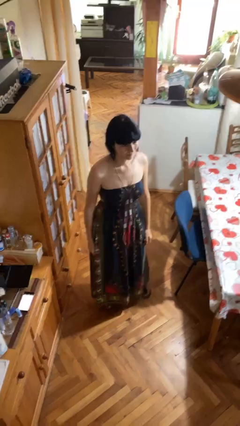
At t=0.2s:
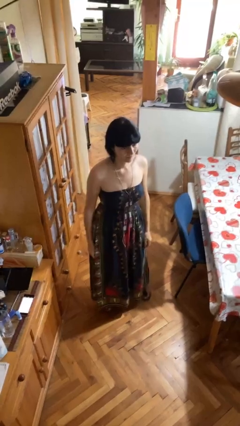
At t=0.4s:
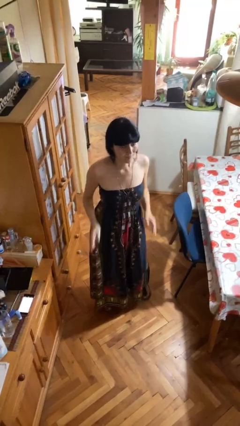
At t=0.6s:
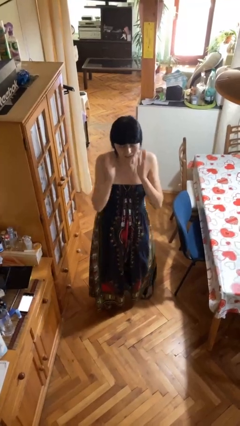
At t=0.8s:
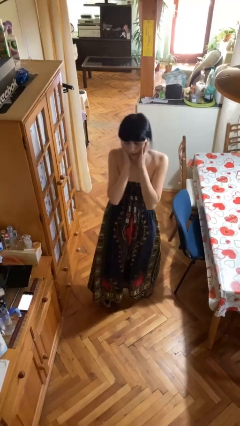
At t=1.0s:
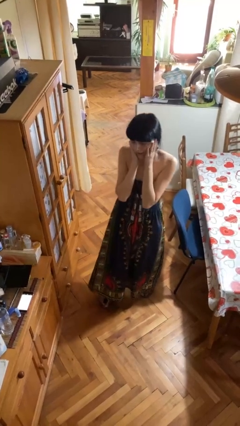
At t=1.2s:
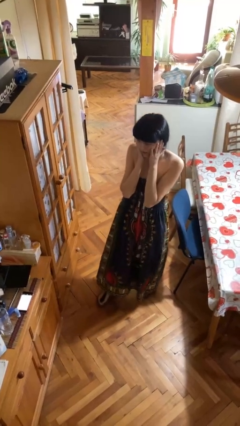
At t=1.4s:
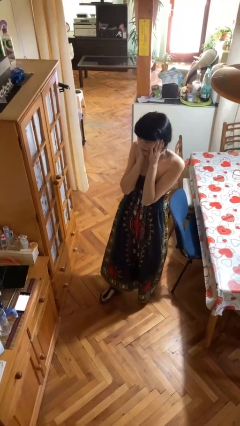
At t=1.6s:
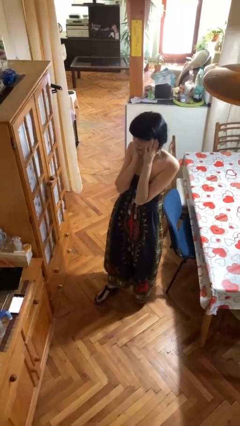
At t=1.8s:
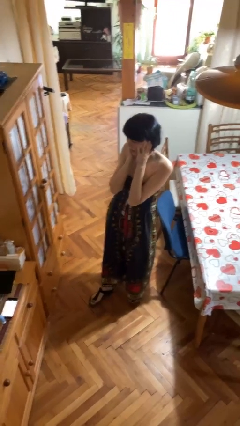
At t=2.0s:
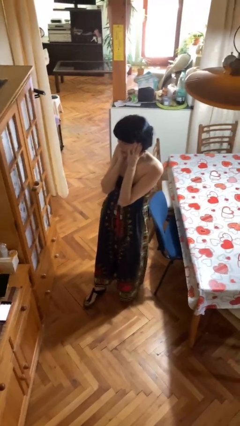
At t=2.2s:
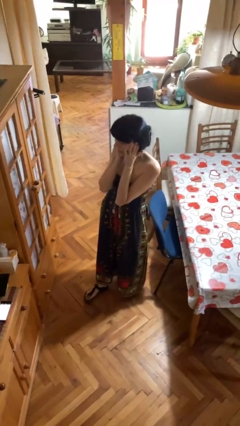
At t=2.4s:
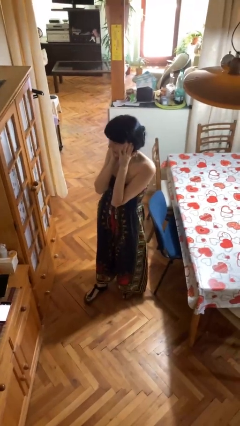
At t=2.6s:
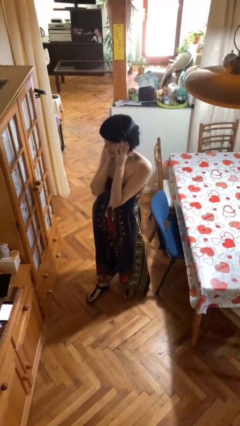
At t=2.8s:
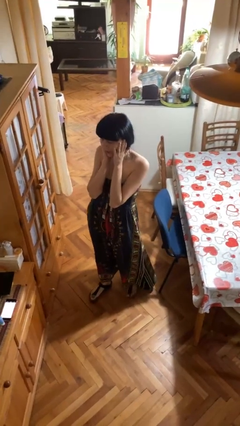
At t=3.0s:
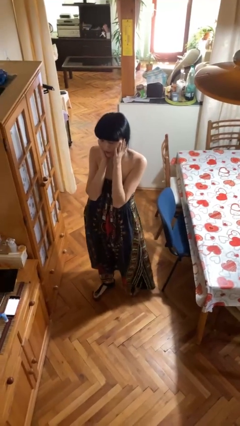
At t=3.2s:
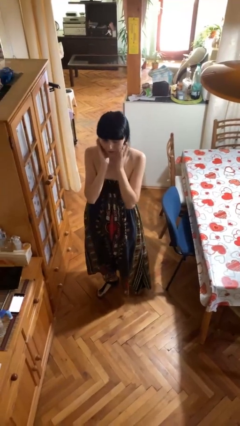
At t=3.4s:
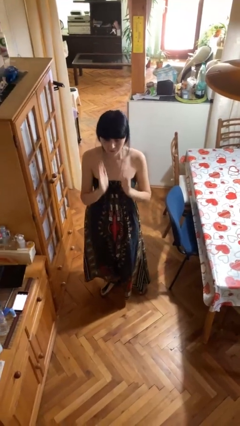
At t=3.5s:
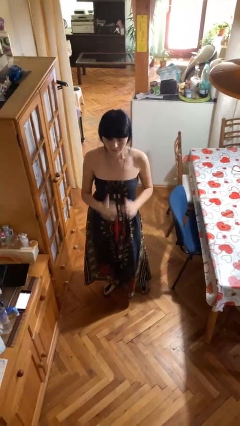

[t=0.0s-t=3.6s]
person puts fingers in ear

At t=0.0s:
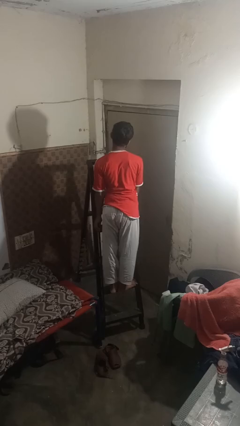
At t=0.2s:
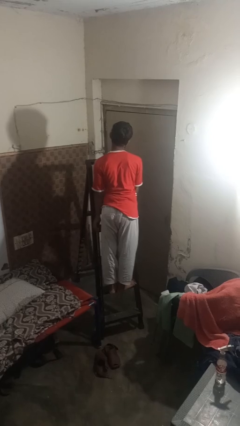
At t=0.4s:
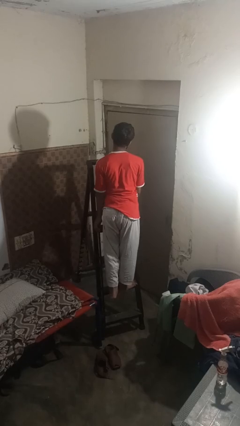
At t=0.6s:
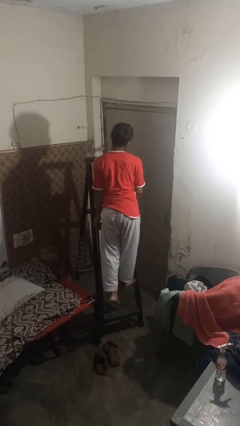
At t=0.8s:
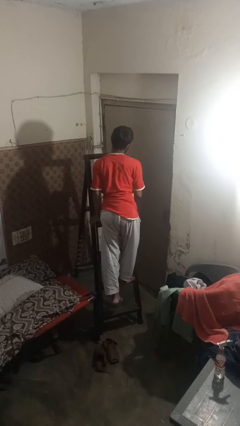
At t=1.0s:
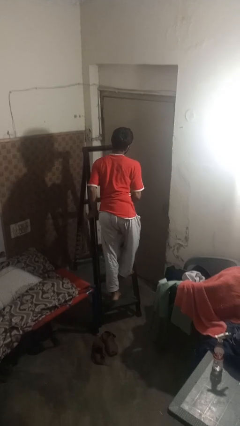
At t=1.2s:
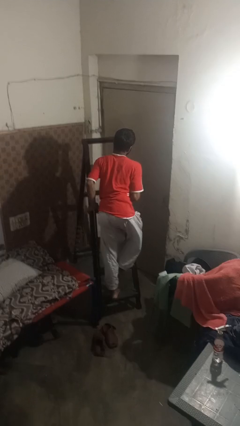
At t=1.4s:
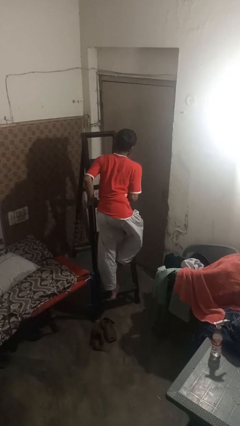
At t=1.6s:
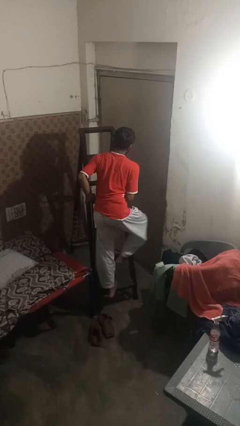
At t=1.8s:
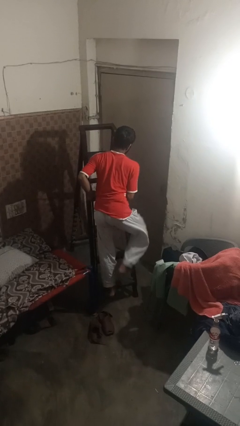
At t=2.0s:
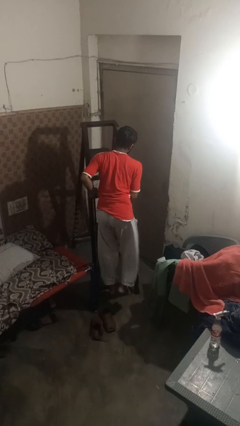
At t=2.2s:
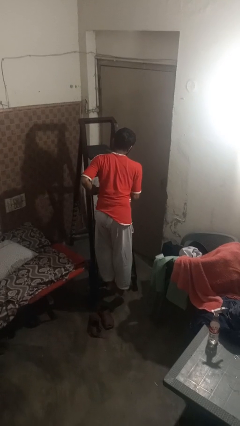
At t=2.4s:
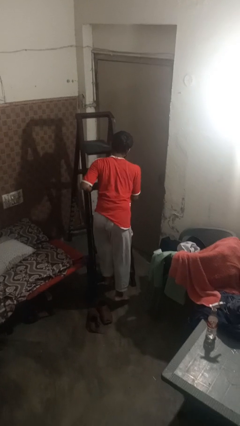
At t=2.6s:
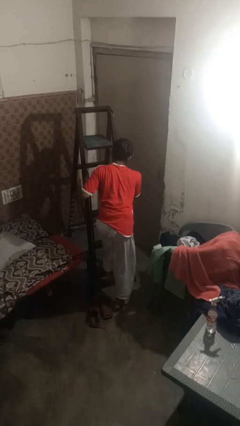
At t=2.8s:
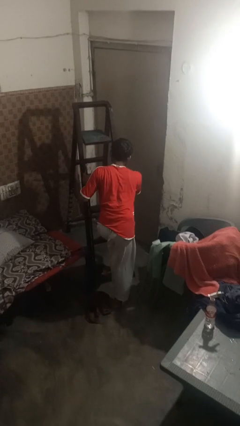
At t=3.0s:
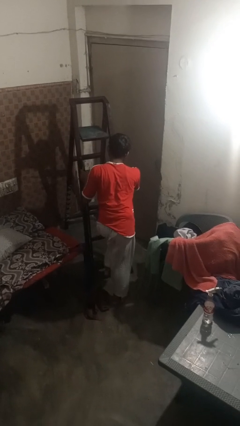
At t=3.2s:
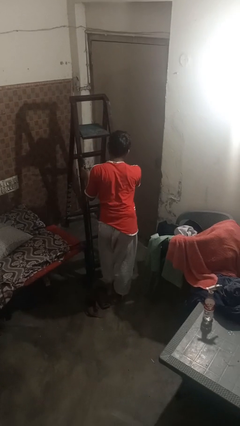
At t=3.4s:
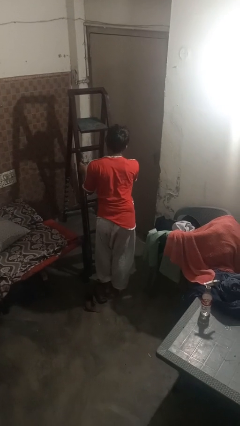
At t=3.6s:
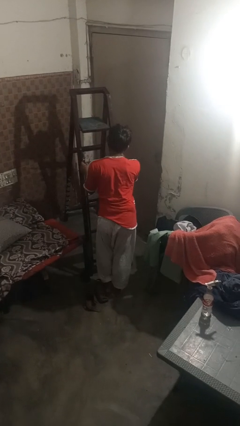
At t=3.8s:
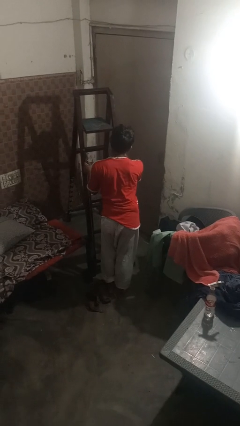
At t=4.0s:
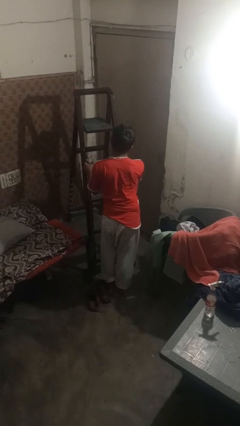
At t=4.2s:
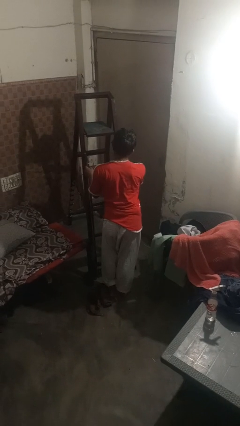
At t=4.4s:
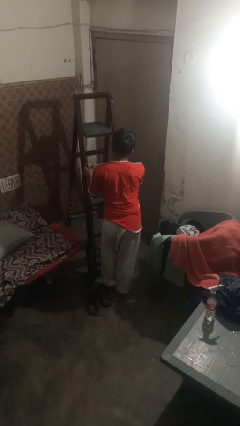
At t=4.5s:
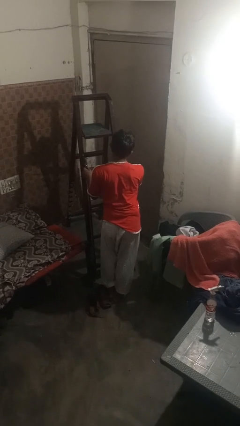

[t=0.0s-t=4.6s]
person climbs down ladder

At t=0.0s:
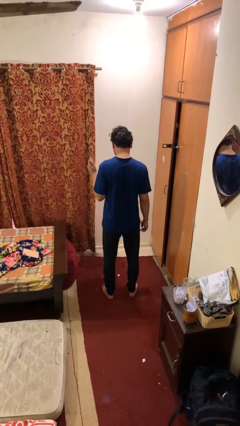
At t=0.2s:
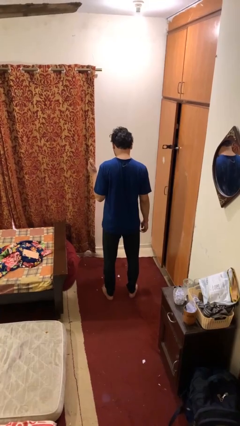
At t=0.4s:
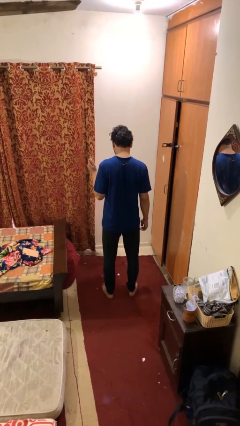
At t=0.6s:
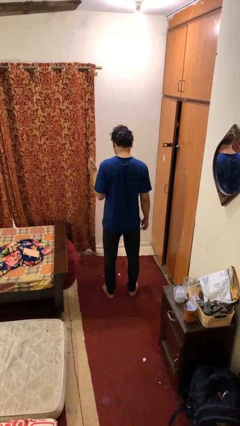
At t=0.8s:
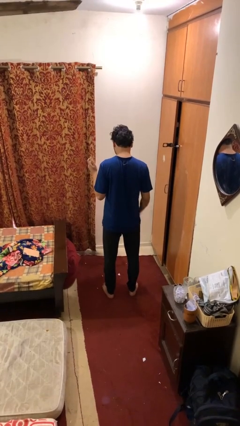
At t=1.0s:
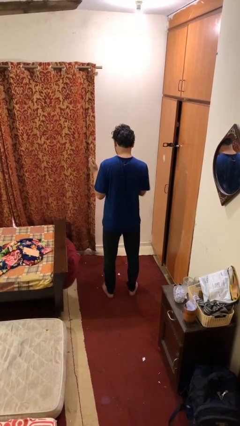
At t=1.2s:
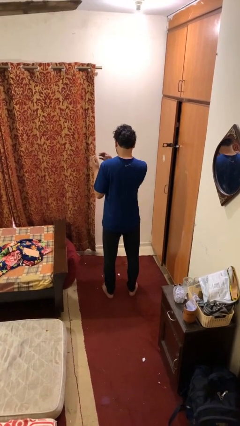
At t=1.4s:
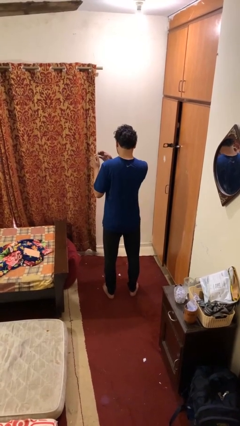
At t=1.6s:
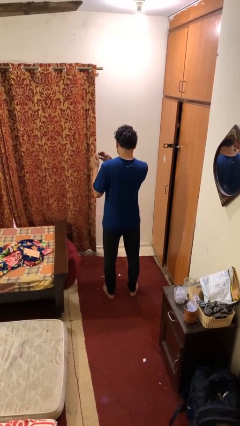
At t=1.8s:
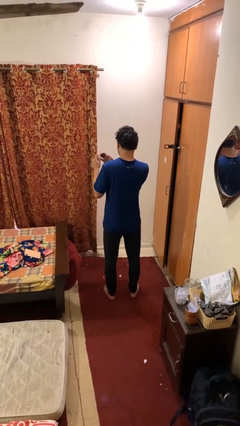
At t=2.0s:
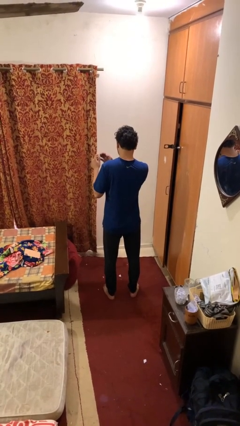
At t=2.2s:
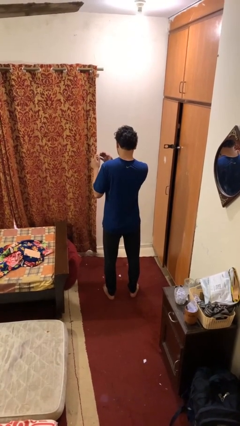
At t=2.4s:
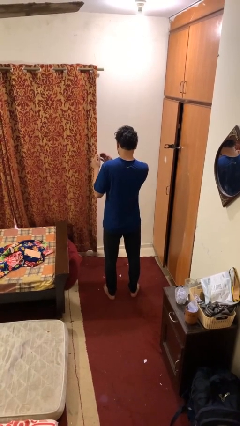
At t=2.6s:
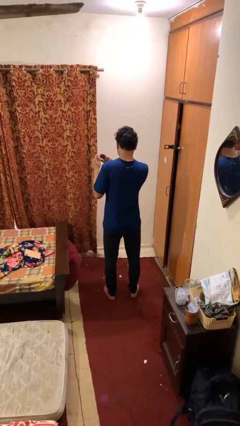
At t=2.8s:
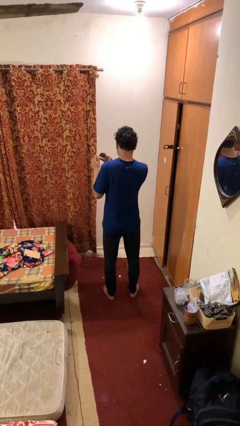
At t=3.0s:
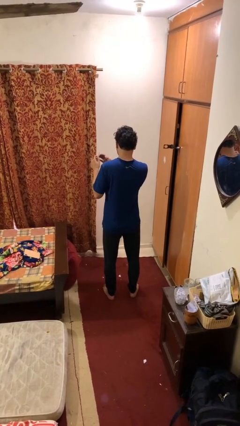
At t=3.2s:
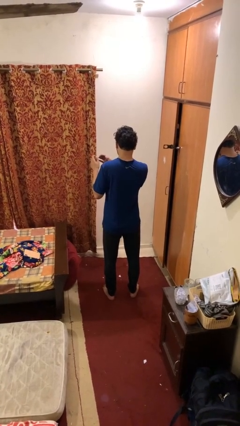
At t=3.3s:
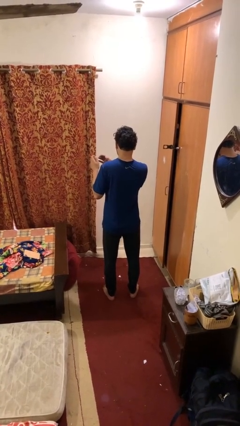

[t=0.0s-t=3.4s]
person files fingernails

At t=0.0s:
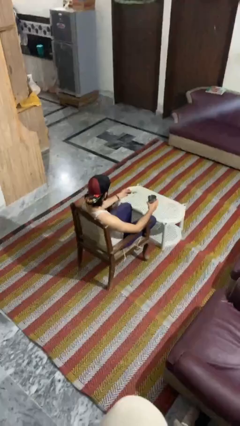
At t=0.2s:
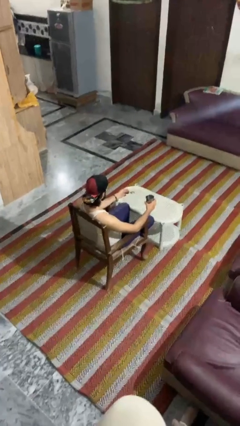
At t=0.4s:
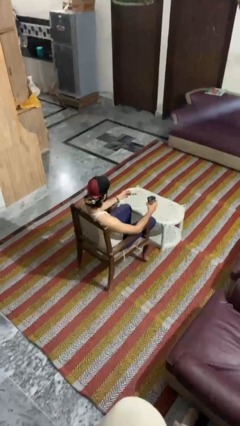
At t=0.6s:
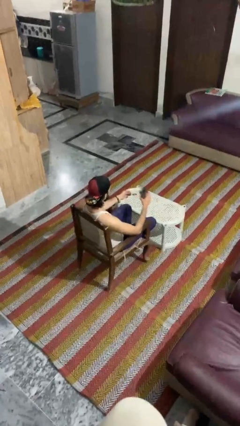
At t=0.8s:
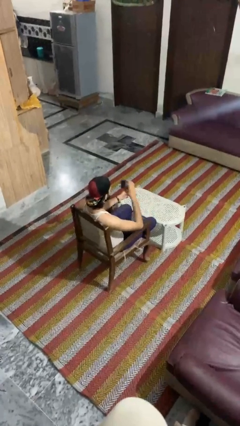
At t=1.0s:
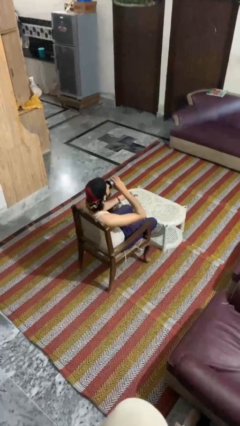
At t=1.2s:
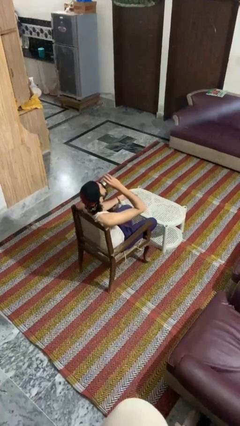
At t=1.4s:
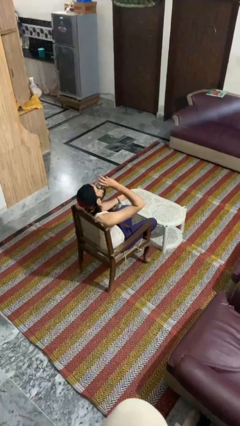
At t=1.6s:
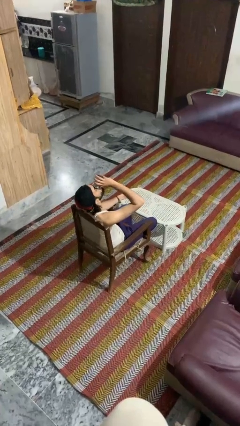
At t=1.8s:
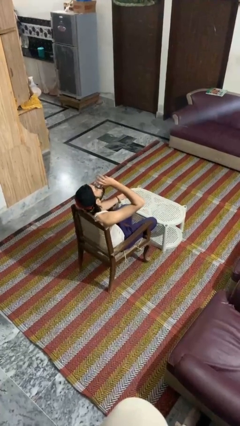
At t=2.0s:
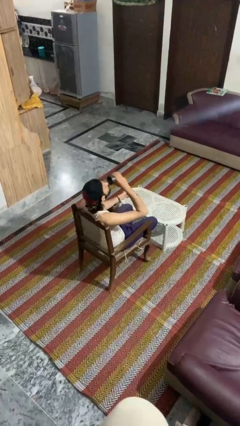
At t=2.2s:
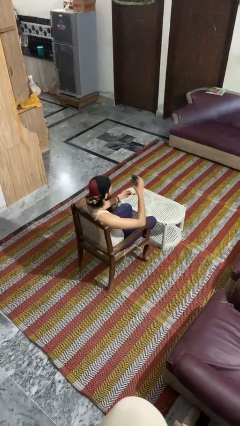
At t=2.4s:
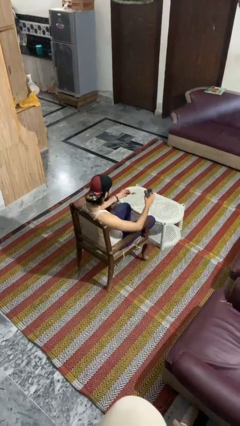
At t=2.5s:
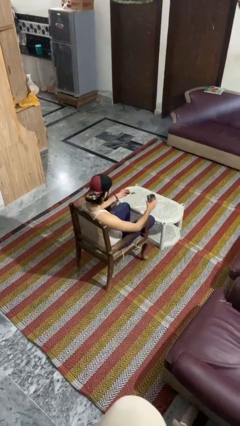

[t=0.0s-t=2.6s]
person drinks from mug

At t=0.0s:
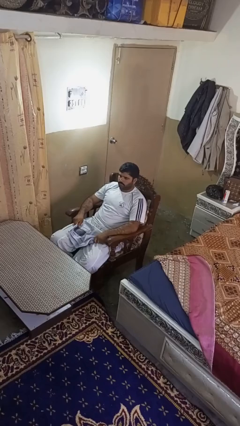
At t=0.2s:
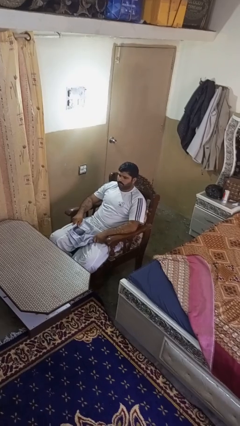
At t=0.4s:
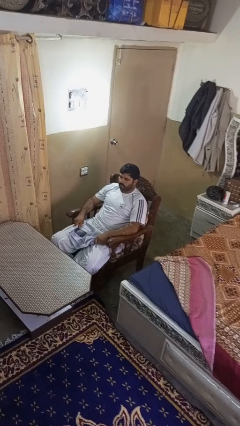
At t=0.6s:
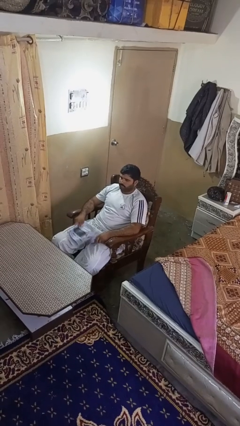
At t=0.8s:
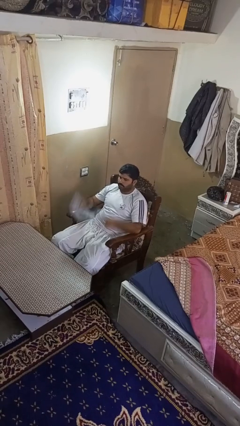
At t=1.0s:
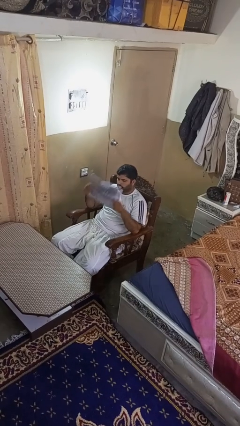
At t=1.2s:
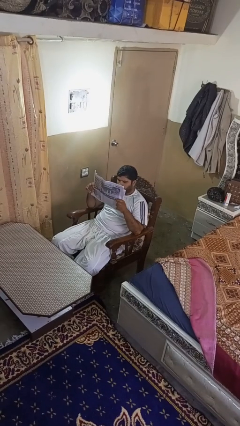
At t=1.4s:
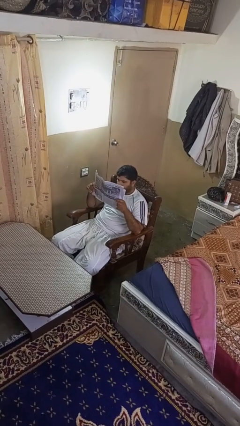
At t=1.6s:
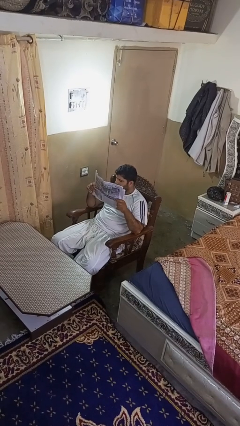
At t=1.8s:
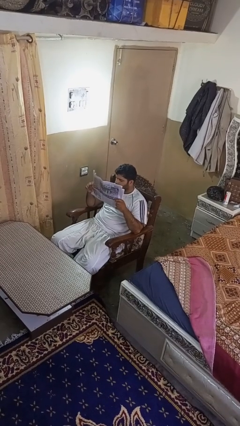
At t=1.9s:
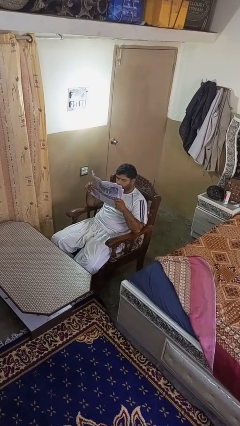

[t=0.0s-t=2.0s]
person reads newspaper

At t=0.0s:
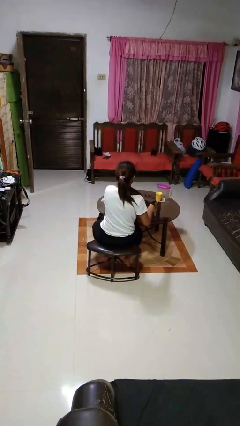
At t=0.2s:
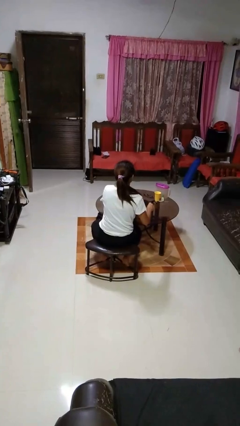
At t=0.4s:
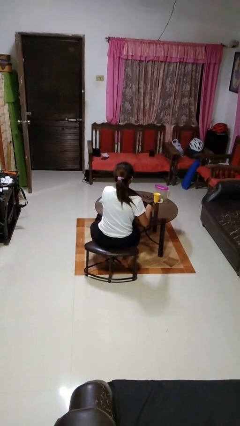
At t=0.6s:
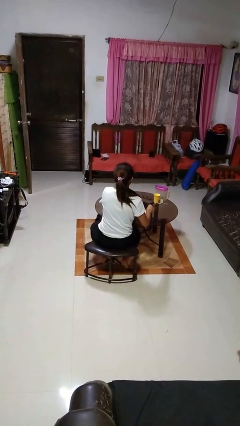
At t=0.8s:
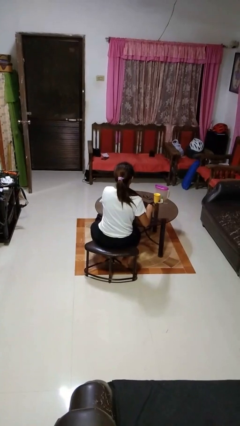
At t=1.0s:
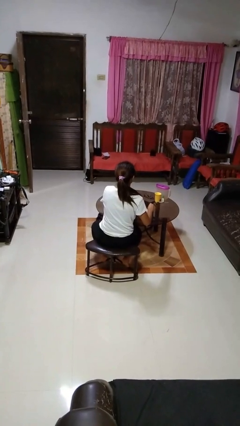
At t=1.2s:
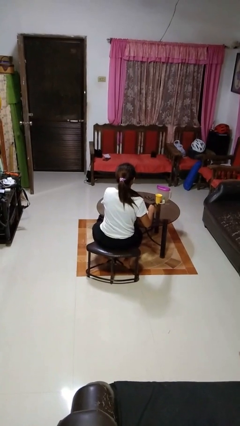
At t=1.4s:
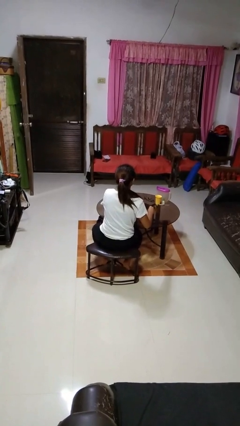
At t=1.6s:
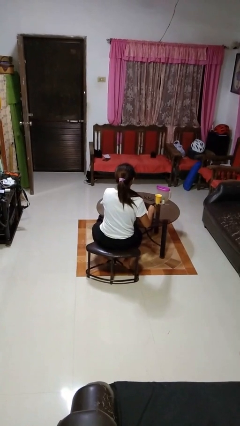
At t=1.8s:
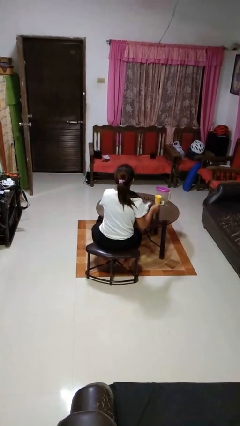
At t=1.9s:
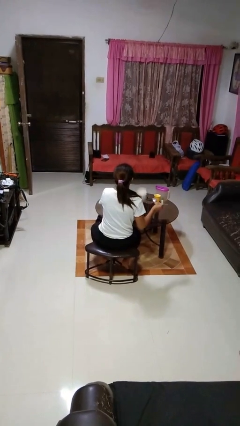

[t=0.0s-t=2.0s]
person stirs mug
